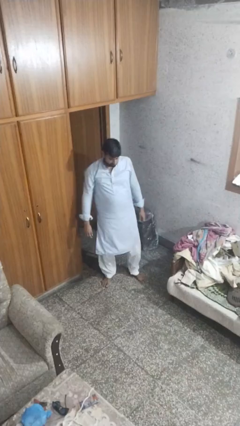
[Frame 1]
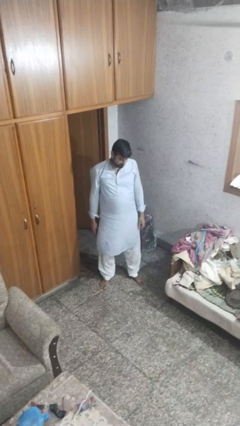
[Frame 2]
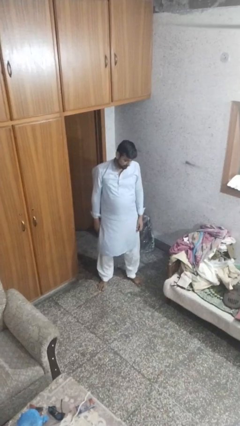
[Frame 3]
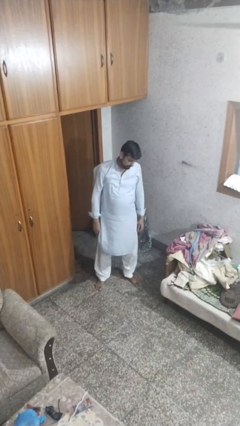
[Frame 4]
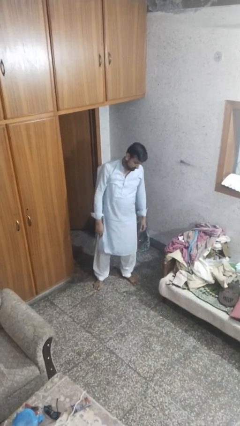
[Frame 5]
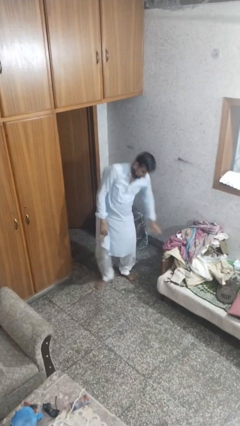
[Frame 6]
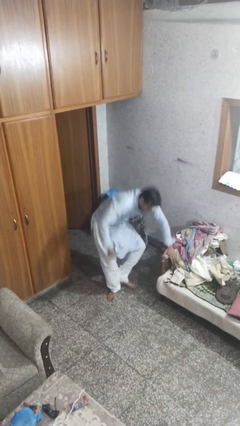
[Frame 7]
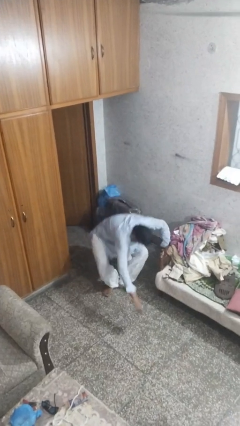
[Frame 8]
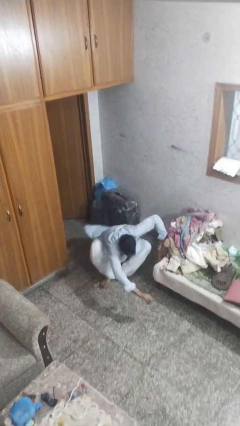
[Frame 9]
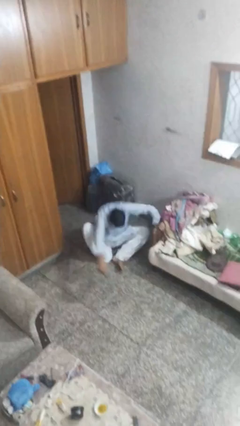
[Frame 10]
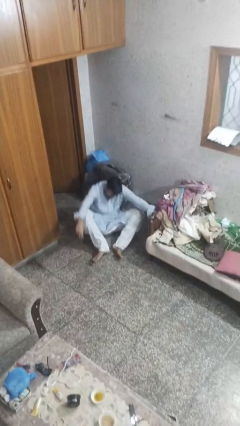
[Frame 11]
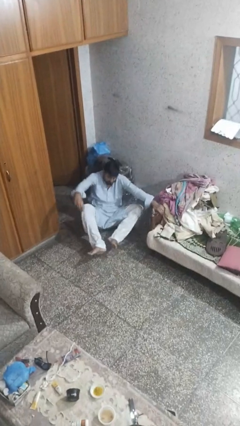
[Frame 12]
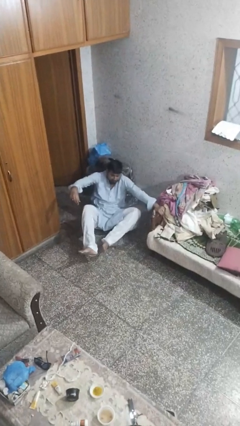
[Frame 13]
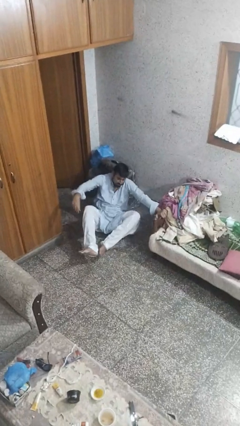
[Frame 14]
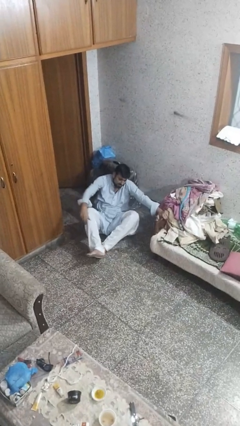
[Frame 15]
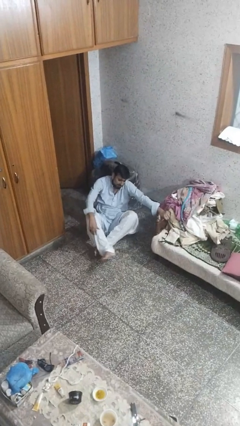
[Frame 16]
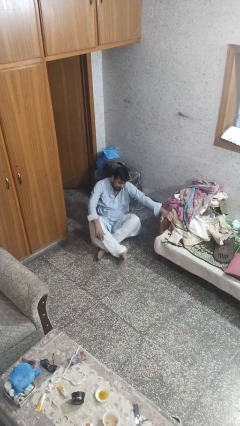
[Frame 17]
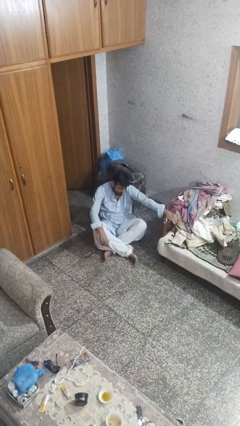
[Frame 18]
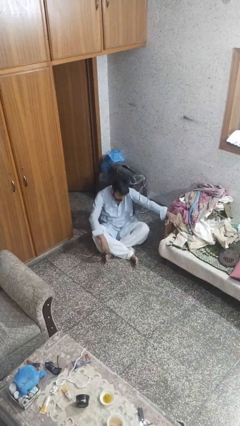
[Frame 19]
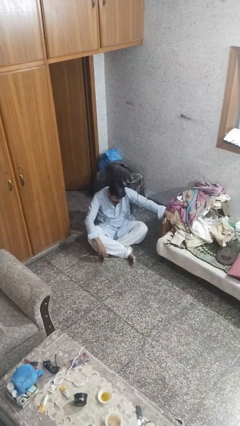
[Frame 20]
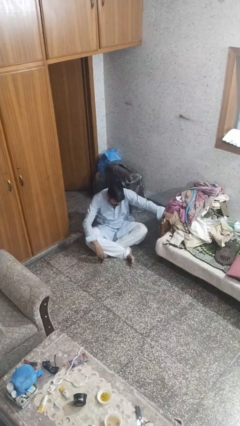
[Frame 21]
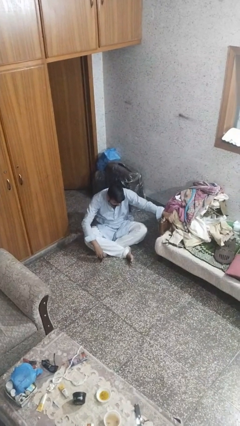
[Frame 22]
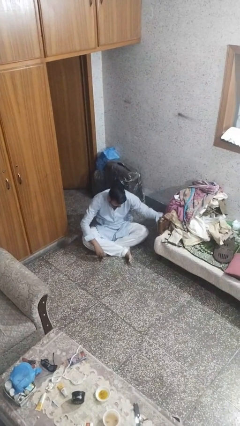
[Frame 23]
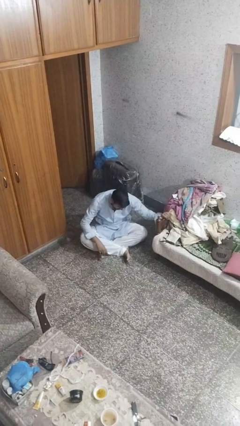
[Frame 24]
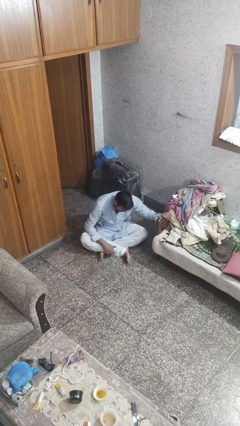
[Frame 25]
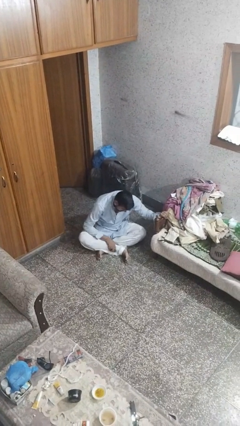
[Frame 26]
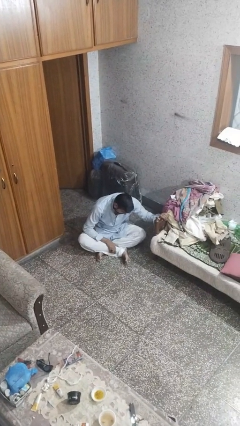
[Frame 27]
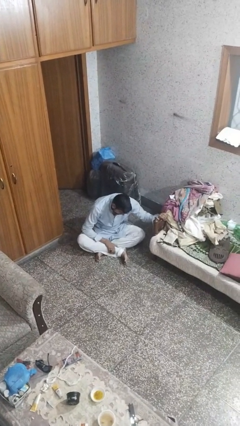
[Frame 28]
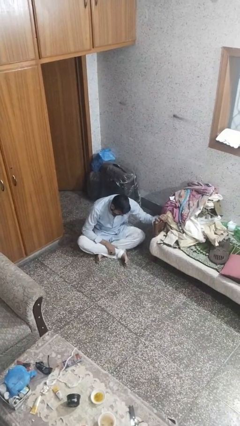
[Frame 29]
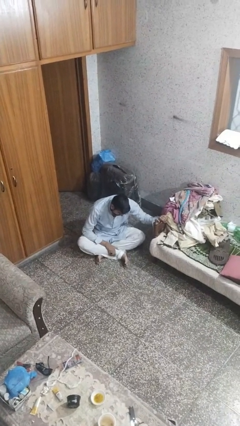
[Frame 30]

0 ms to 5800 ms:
person falls while standing

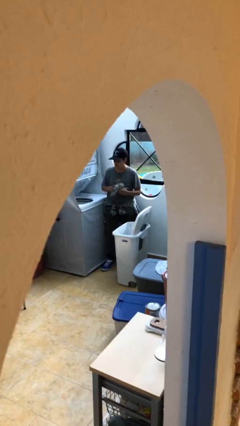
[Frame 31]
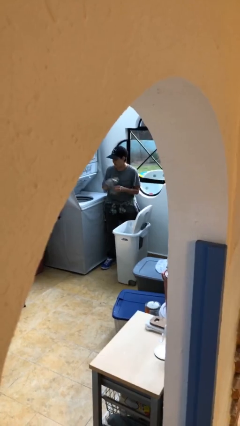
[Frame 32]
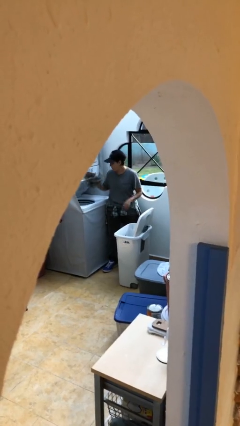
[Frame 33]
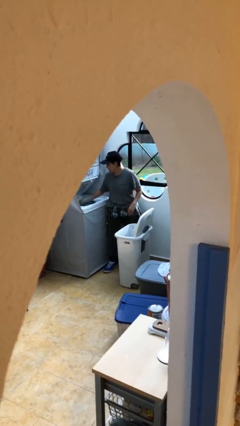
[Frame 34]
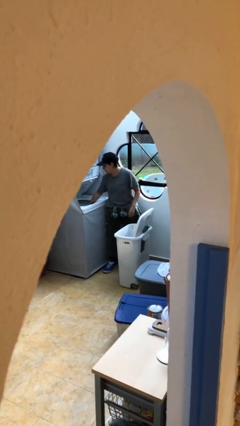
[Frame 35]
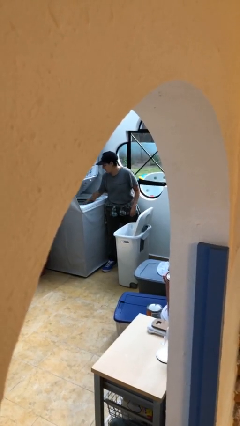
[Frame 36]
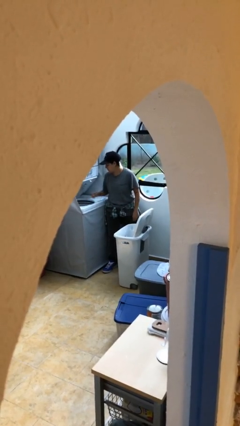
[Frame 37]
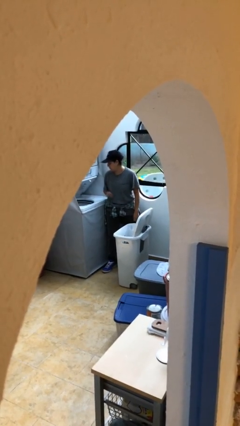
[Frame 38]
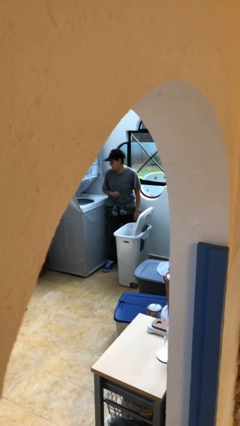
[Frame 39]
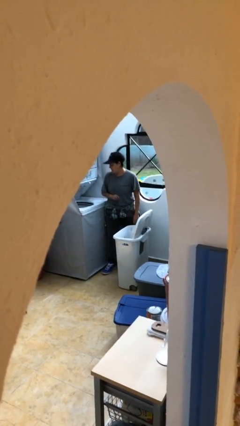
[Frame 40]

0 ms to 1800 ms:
person loads clotheswasher

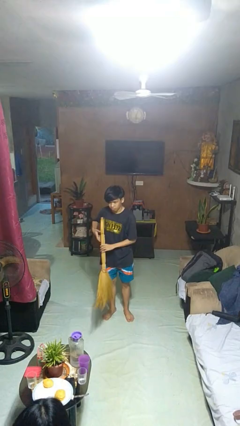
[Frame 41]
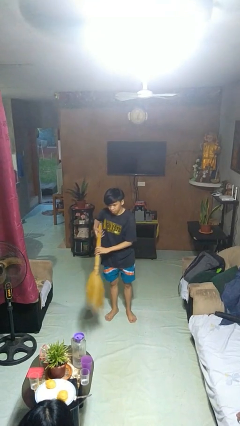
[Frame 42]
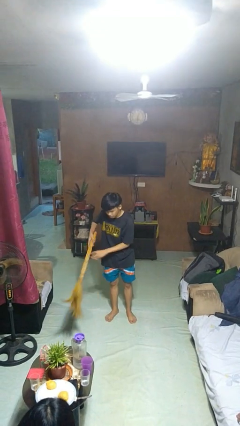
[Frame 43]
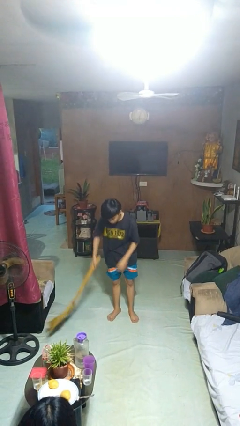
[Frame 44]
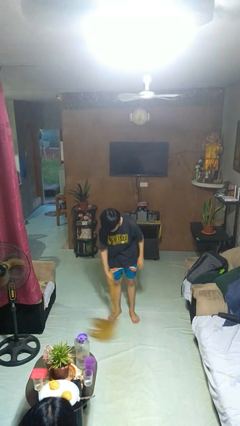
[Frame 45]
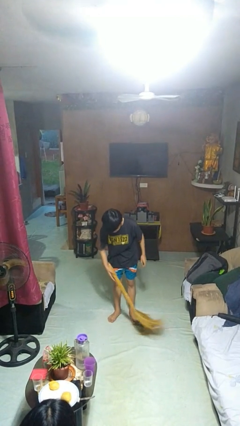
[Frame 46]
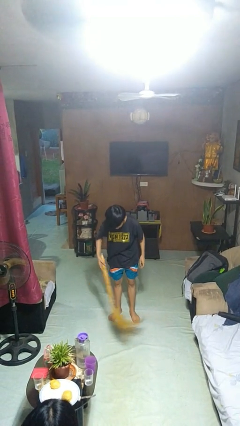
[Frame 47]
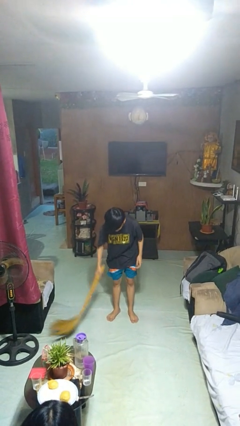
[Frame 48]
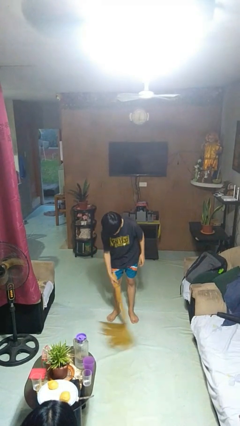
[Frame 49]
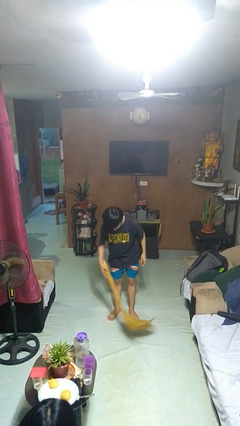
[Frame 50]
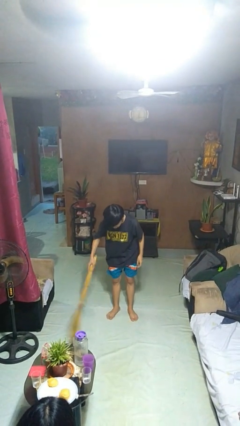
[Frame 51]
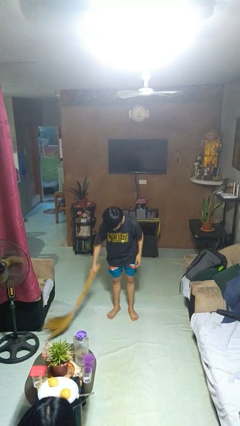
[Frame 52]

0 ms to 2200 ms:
person sweeps floor

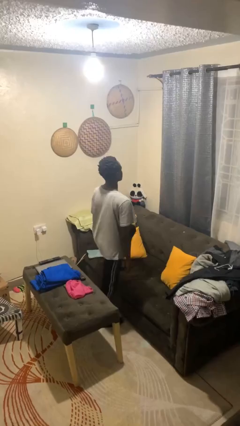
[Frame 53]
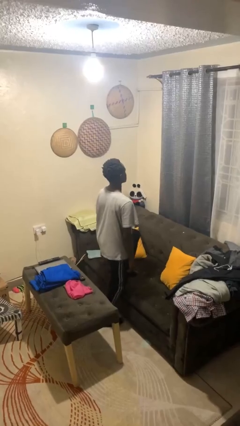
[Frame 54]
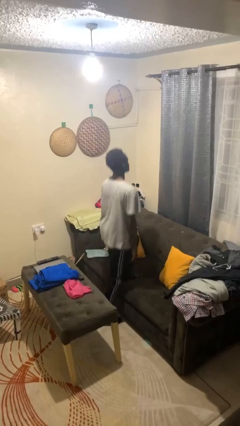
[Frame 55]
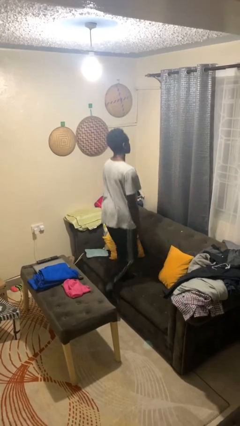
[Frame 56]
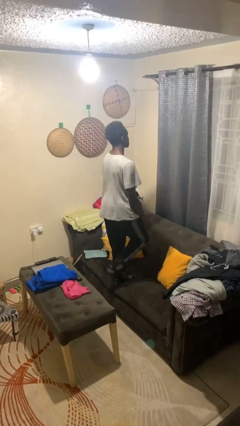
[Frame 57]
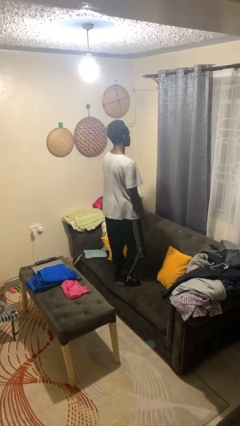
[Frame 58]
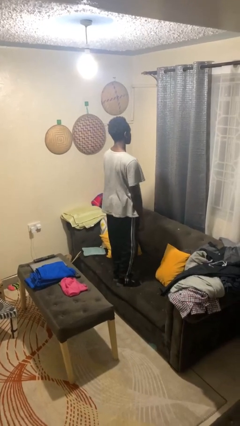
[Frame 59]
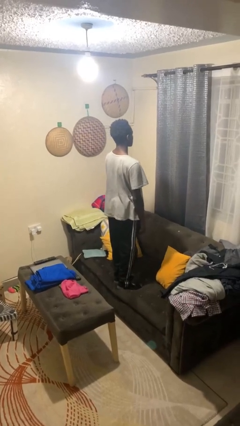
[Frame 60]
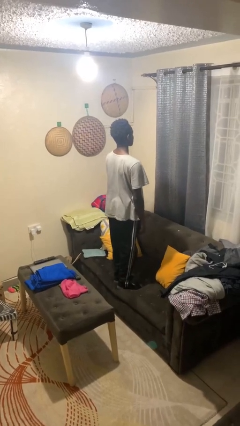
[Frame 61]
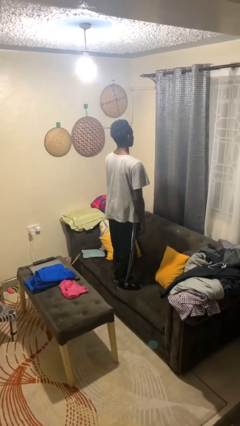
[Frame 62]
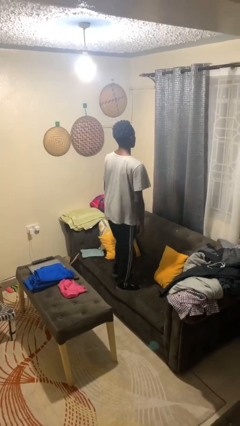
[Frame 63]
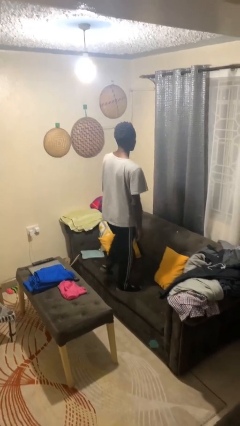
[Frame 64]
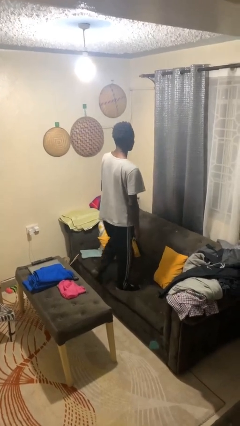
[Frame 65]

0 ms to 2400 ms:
person jumps on couch

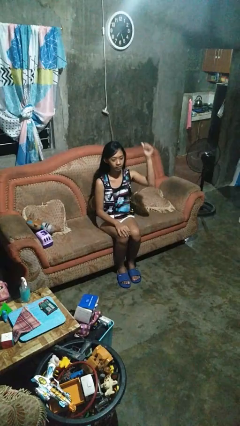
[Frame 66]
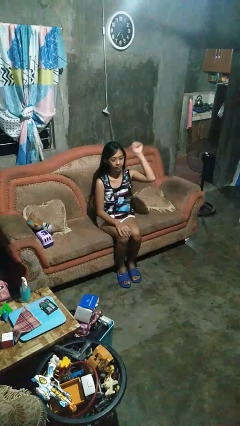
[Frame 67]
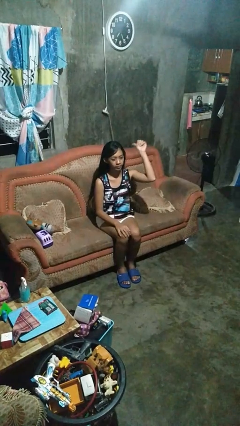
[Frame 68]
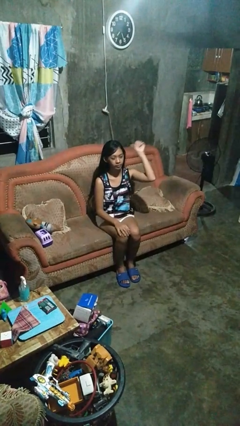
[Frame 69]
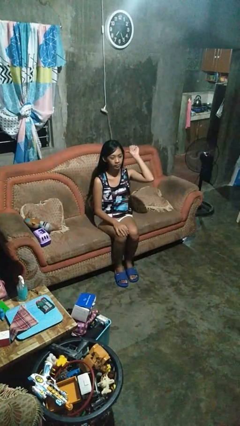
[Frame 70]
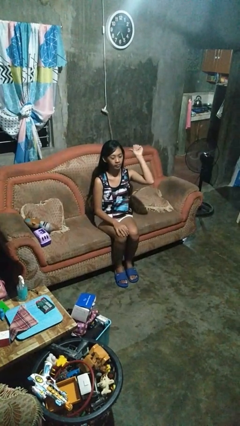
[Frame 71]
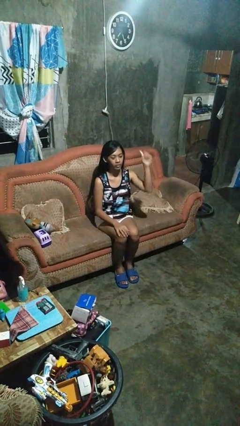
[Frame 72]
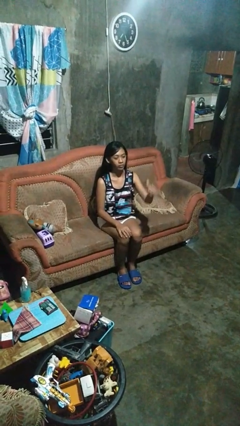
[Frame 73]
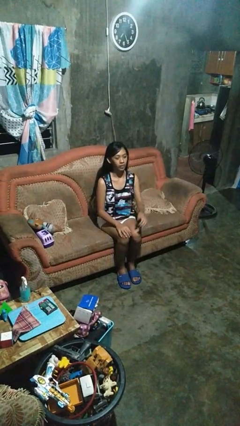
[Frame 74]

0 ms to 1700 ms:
person gestures behind me

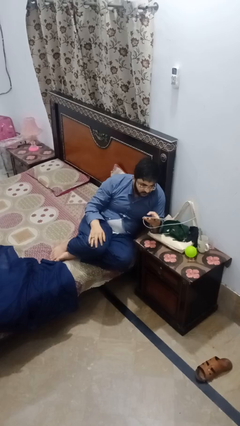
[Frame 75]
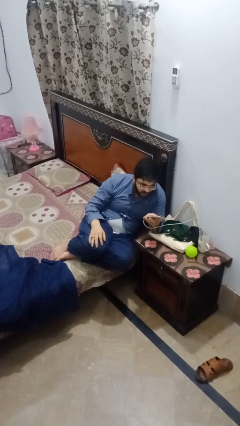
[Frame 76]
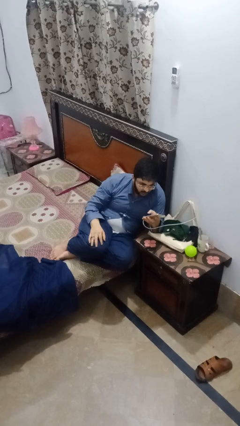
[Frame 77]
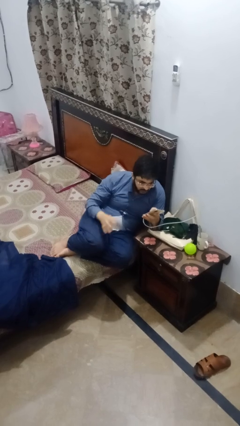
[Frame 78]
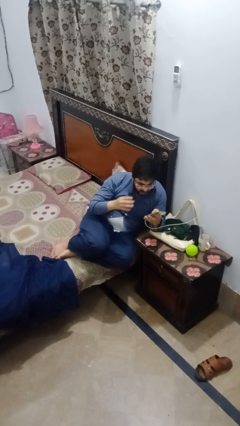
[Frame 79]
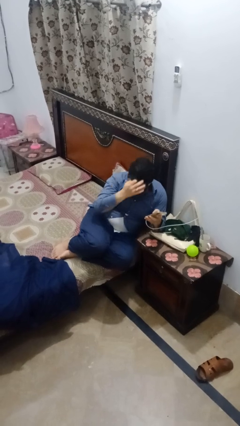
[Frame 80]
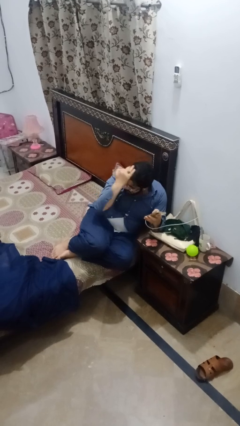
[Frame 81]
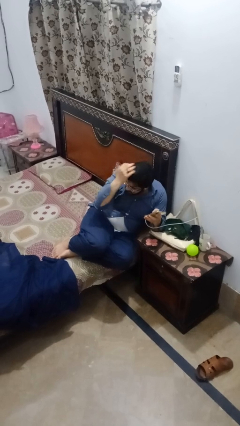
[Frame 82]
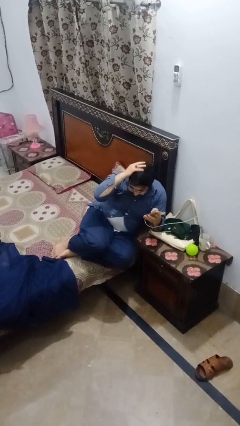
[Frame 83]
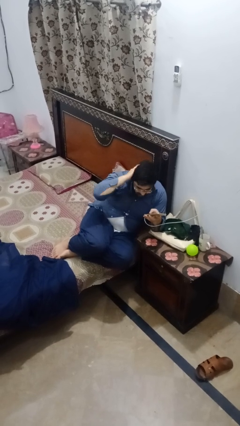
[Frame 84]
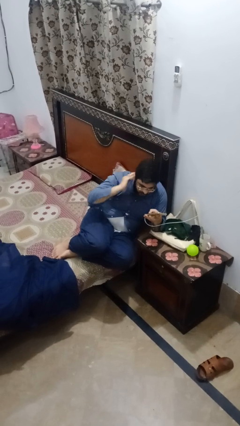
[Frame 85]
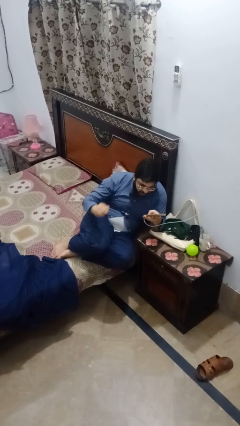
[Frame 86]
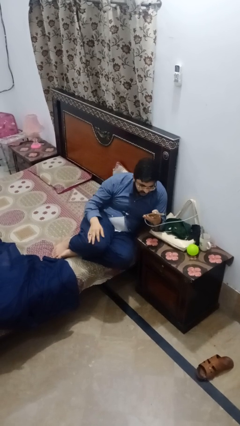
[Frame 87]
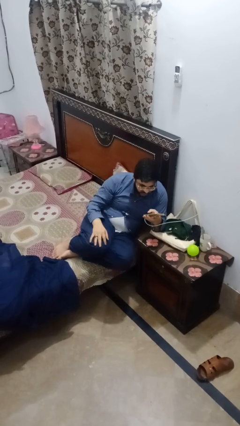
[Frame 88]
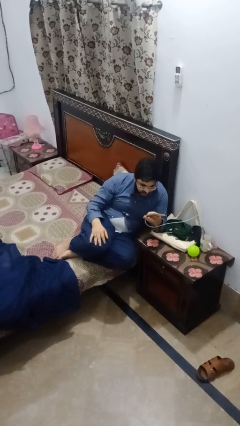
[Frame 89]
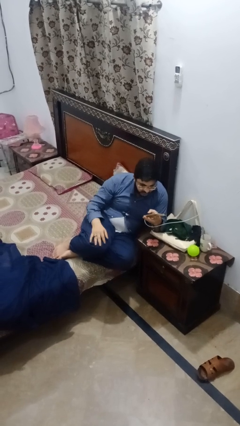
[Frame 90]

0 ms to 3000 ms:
person strokes hair

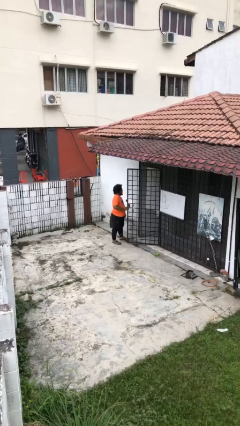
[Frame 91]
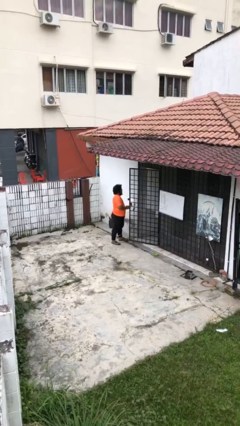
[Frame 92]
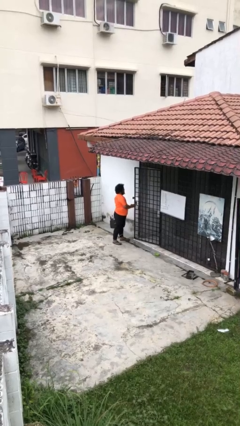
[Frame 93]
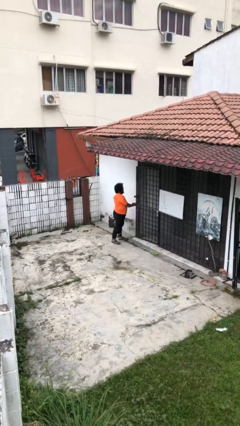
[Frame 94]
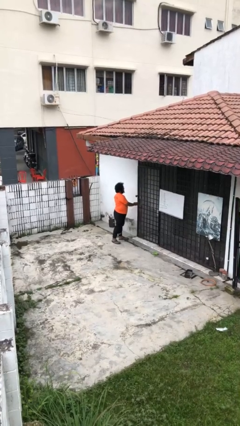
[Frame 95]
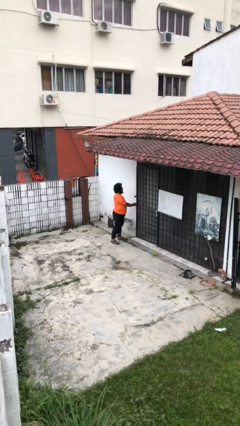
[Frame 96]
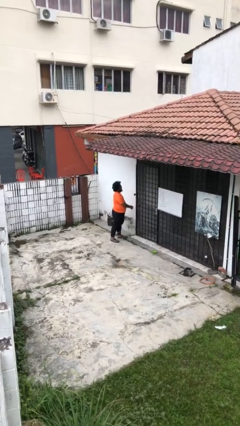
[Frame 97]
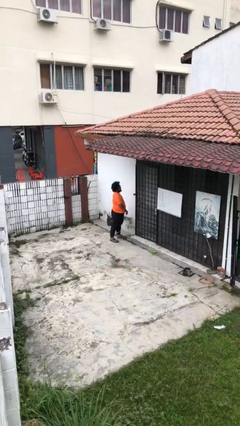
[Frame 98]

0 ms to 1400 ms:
person closes facility door
